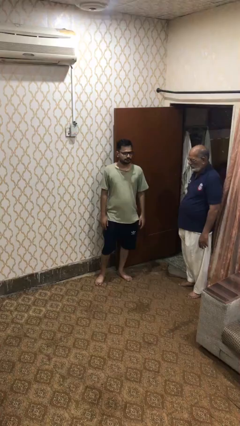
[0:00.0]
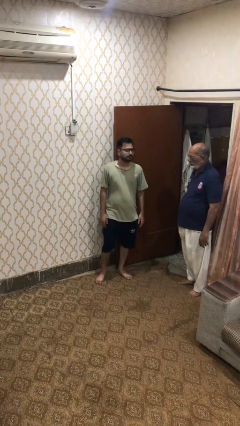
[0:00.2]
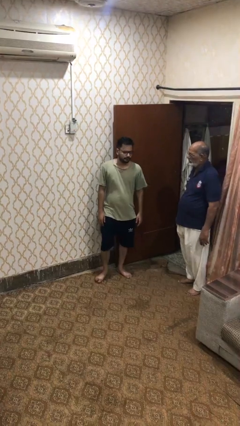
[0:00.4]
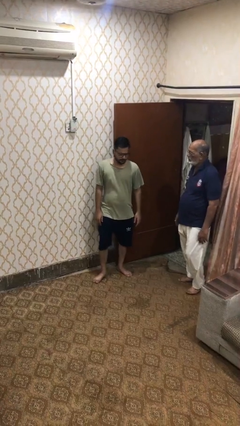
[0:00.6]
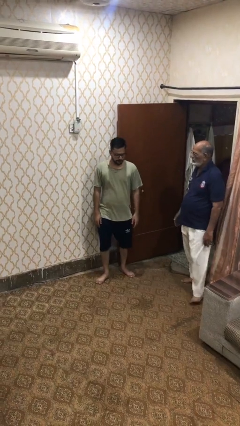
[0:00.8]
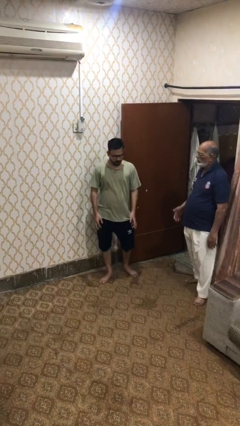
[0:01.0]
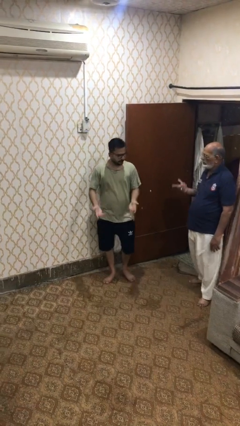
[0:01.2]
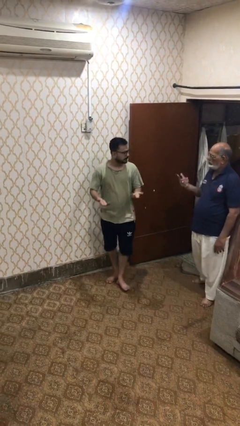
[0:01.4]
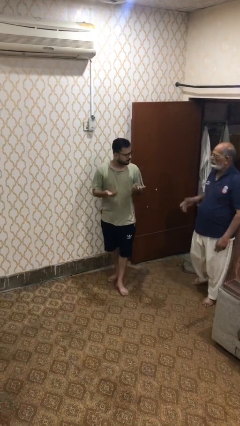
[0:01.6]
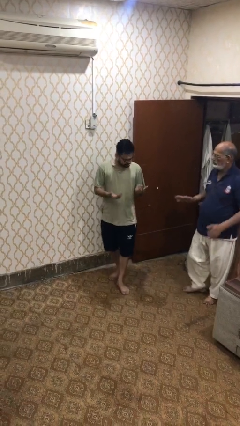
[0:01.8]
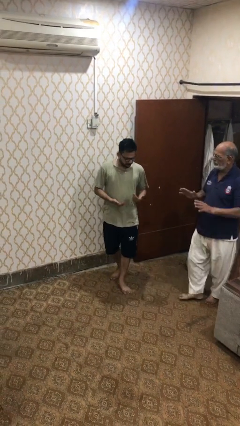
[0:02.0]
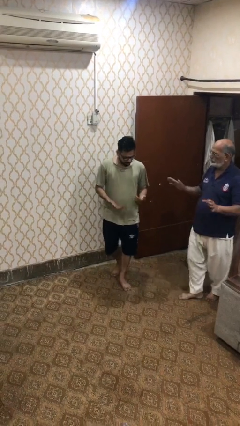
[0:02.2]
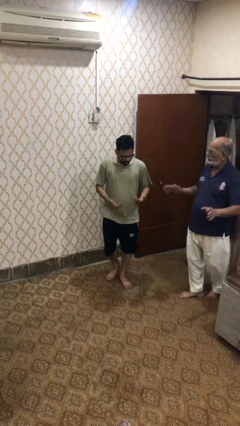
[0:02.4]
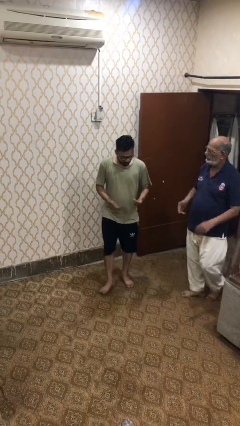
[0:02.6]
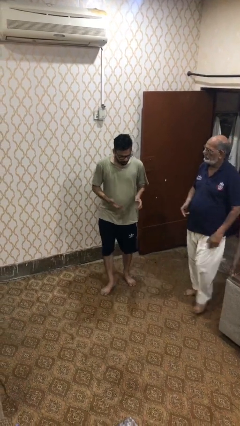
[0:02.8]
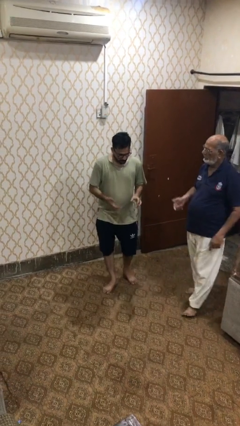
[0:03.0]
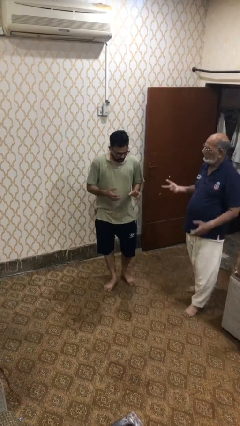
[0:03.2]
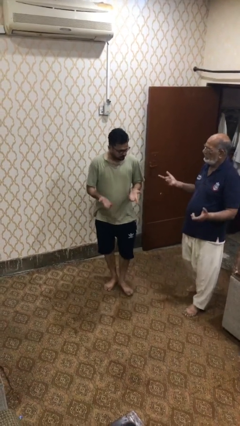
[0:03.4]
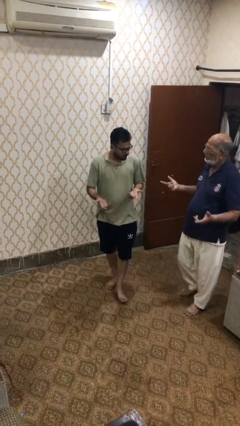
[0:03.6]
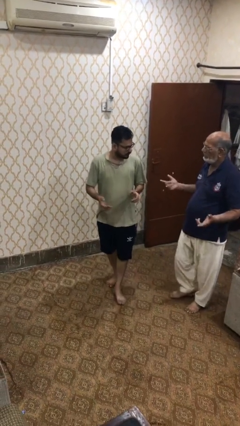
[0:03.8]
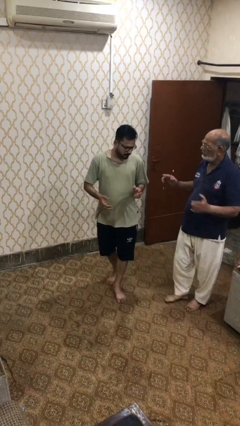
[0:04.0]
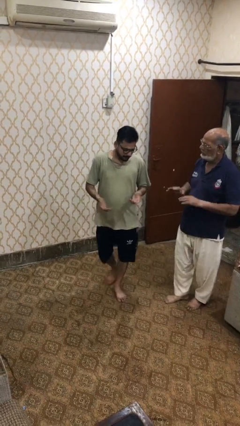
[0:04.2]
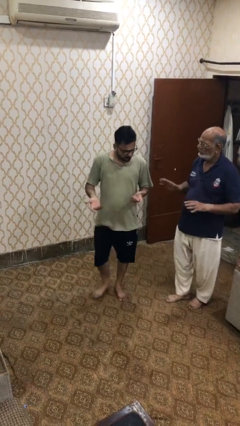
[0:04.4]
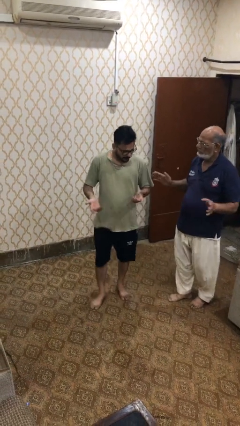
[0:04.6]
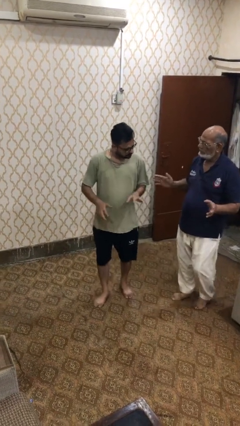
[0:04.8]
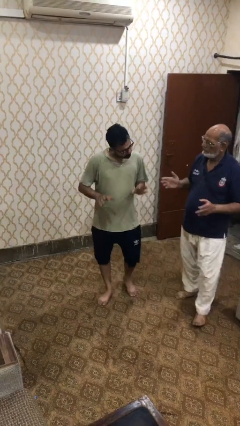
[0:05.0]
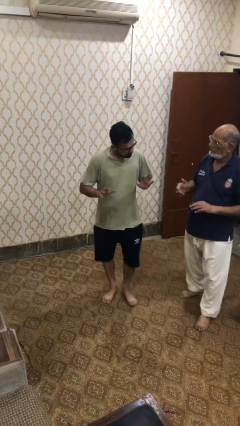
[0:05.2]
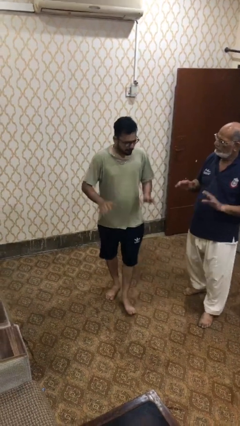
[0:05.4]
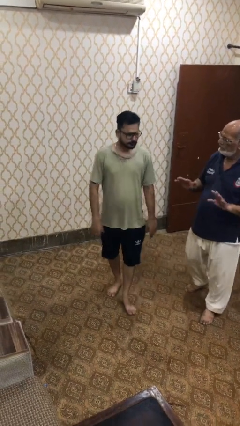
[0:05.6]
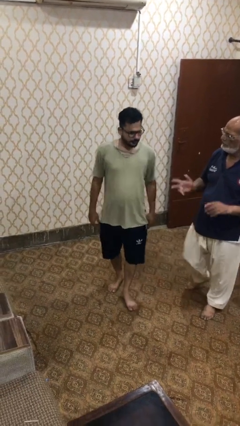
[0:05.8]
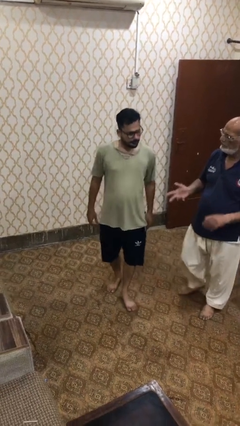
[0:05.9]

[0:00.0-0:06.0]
person talks to person

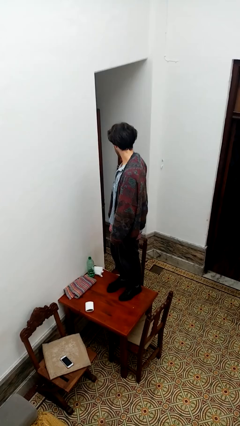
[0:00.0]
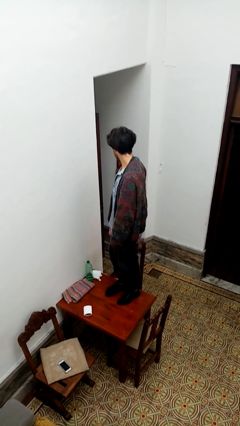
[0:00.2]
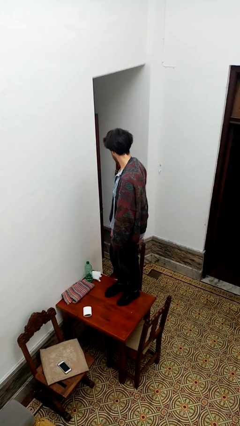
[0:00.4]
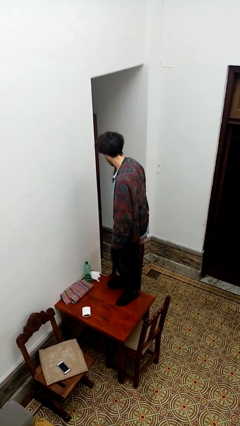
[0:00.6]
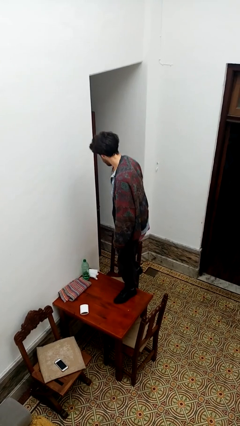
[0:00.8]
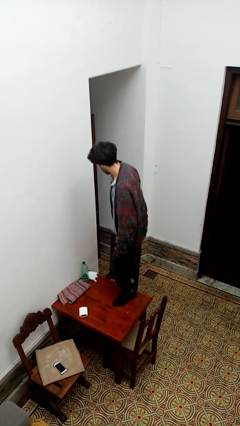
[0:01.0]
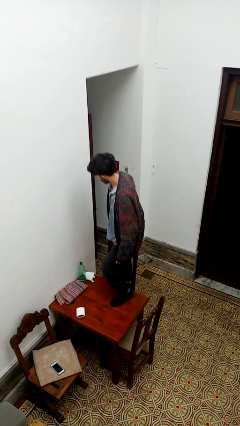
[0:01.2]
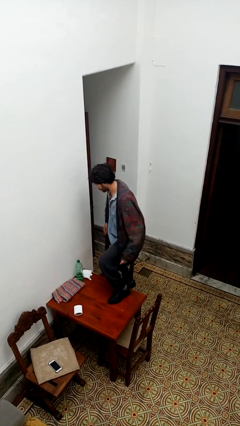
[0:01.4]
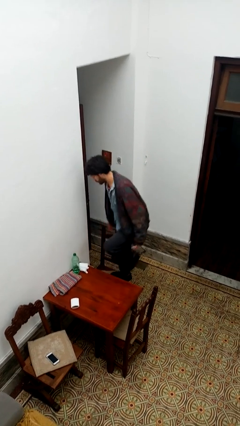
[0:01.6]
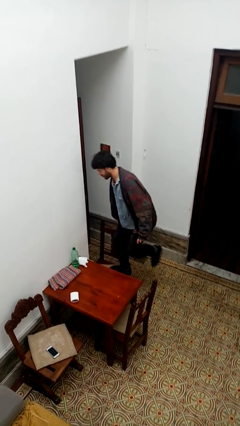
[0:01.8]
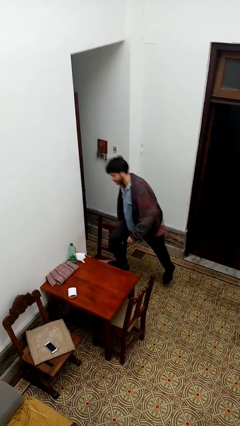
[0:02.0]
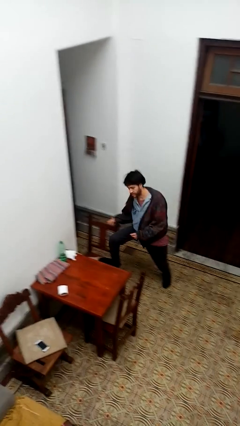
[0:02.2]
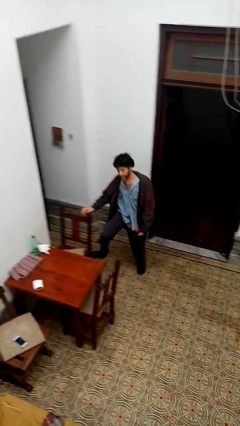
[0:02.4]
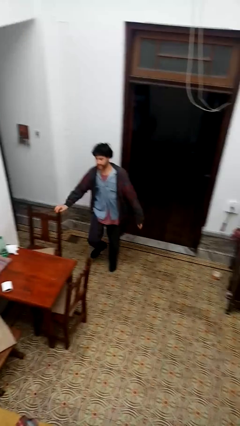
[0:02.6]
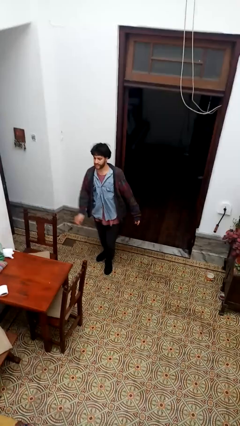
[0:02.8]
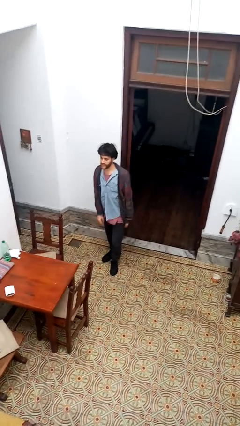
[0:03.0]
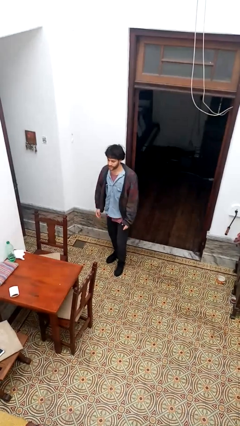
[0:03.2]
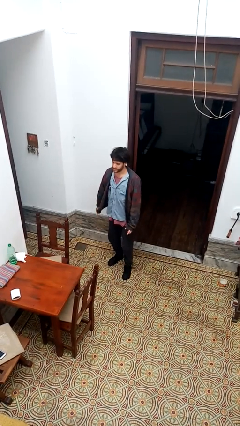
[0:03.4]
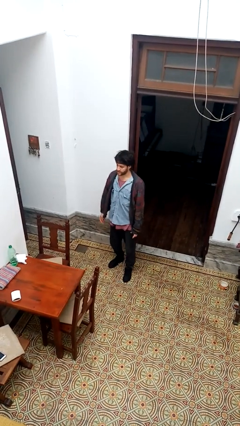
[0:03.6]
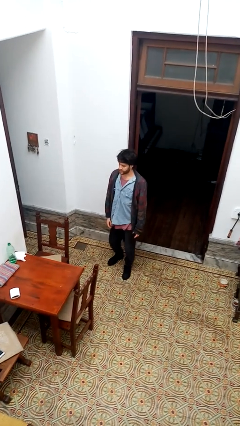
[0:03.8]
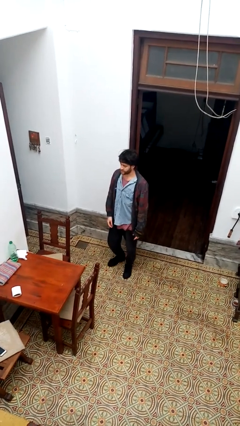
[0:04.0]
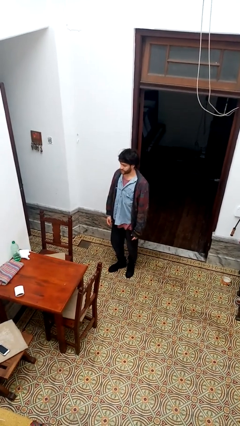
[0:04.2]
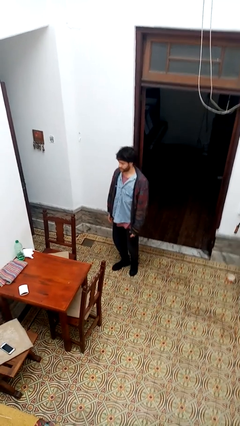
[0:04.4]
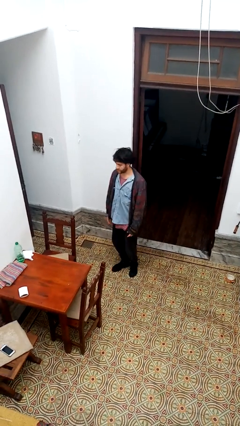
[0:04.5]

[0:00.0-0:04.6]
person climbs off table

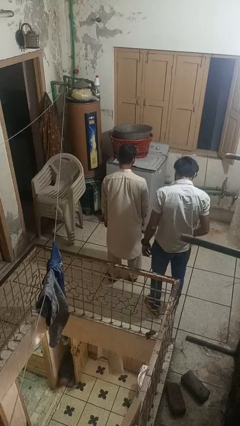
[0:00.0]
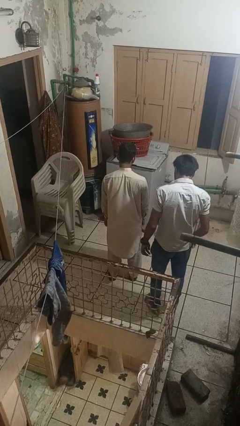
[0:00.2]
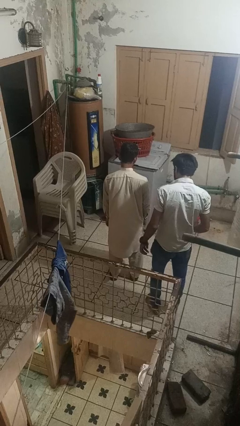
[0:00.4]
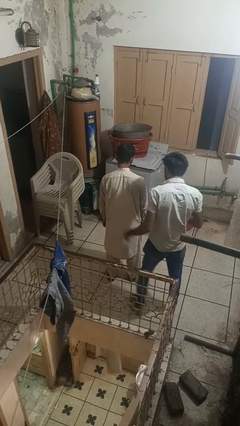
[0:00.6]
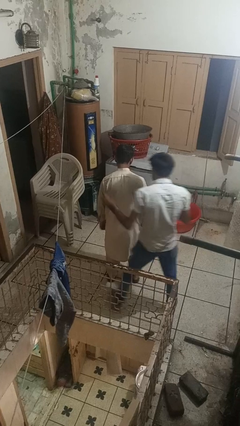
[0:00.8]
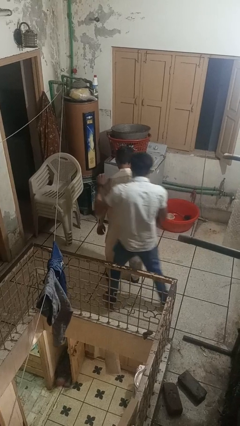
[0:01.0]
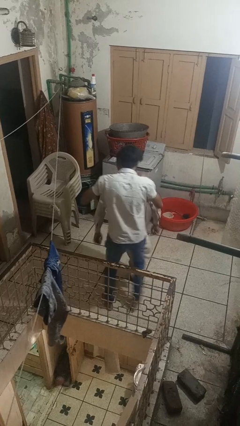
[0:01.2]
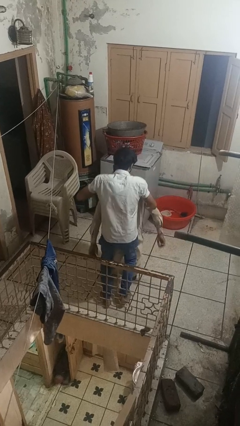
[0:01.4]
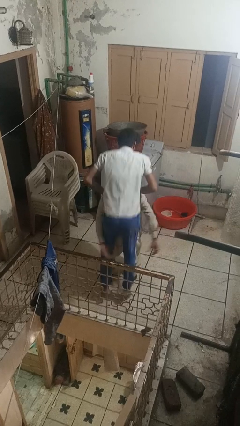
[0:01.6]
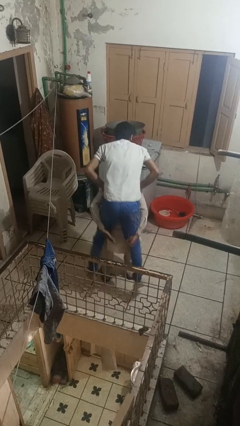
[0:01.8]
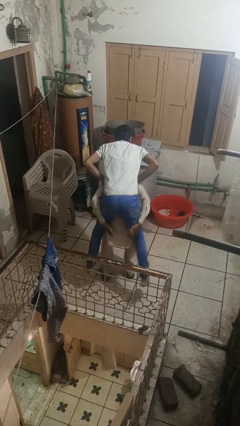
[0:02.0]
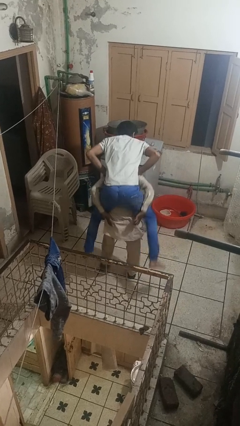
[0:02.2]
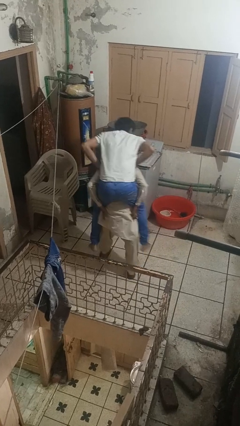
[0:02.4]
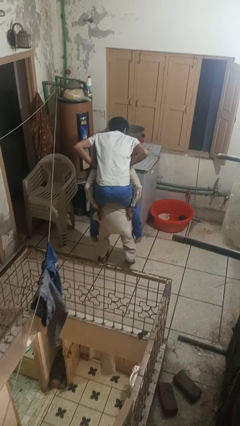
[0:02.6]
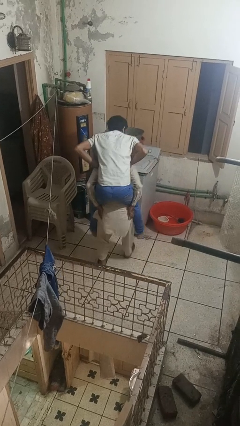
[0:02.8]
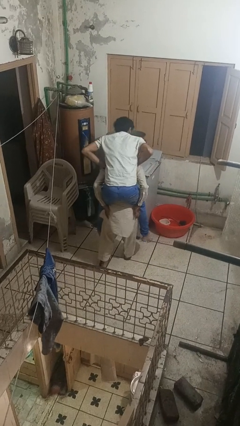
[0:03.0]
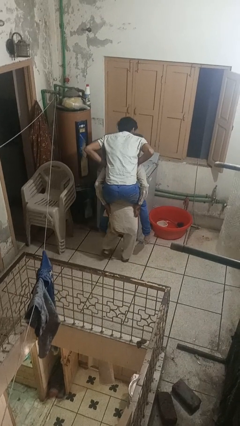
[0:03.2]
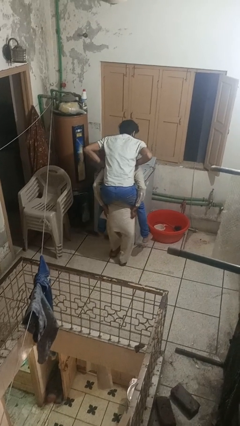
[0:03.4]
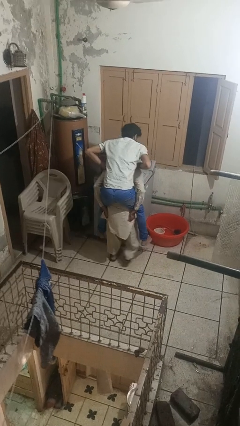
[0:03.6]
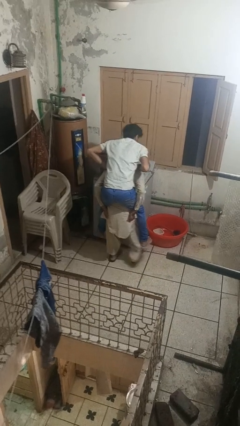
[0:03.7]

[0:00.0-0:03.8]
person carries person on back

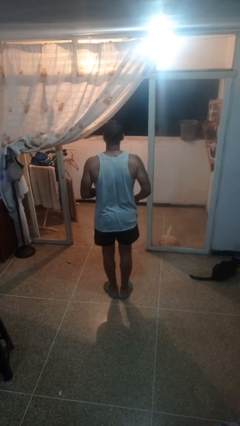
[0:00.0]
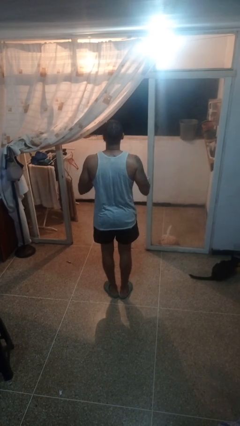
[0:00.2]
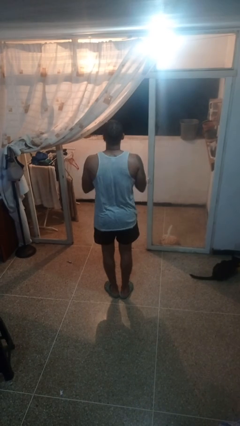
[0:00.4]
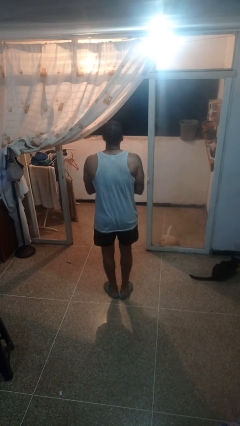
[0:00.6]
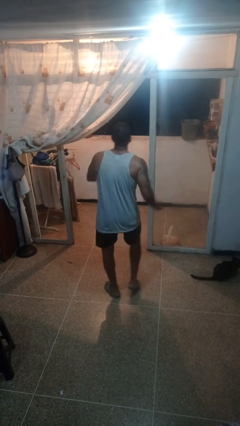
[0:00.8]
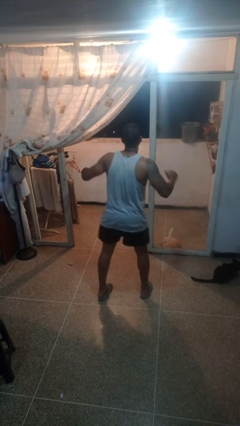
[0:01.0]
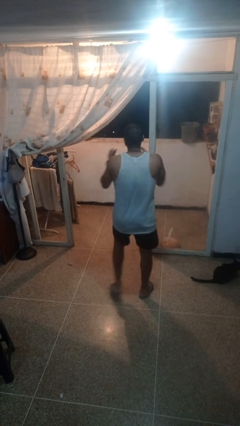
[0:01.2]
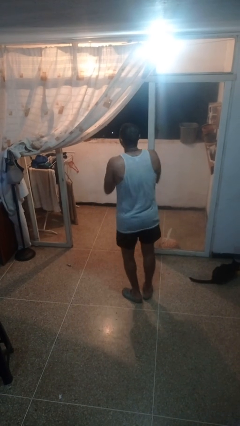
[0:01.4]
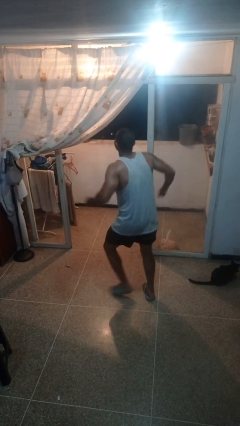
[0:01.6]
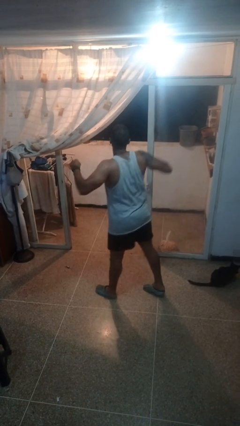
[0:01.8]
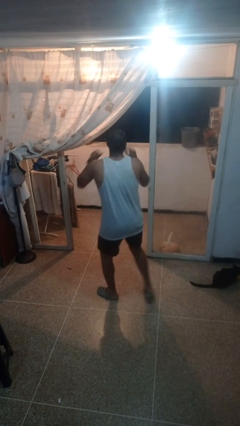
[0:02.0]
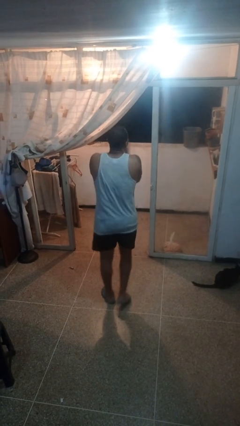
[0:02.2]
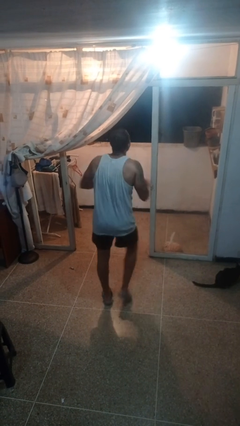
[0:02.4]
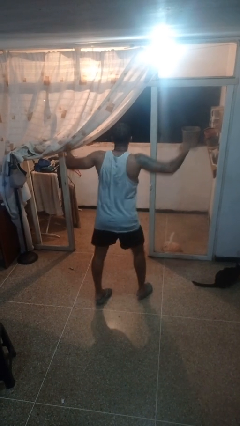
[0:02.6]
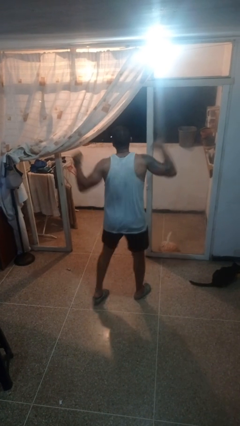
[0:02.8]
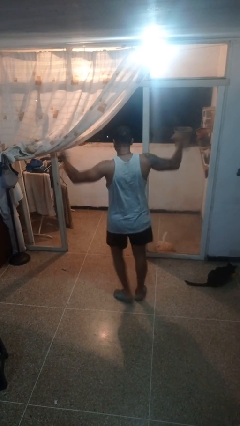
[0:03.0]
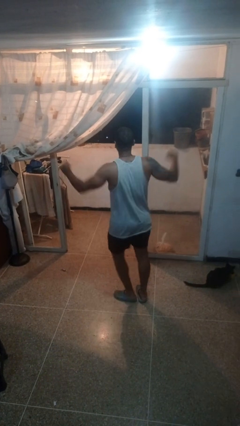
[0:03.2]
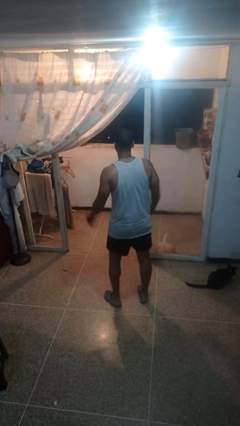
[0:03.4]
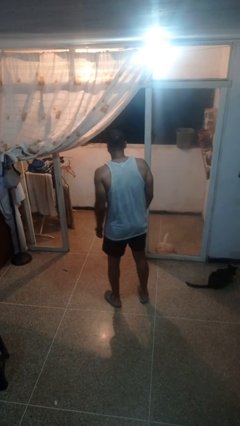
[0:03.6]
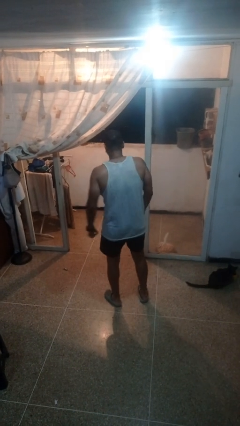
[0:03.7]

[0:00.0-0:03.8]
person dances in place
